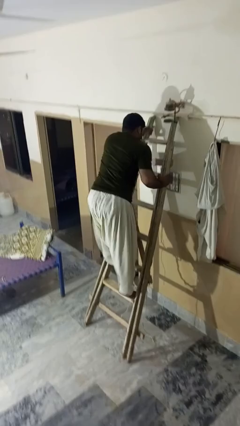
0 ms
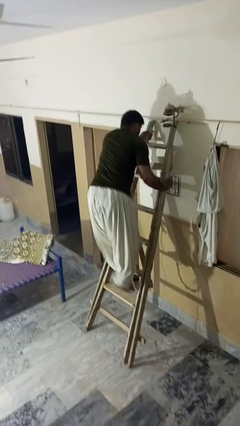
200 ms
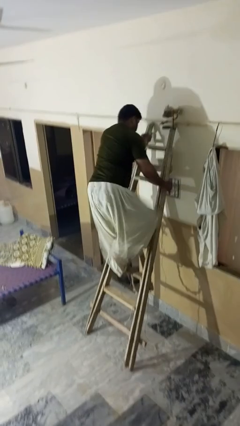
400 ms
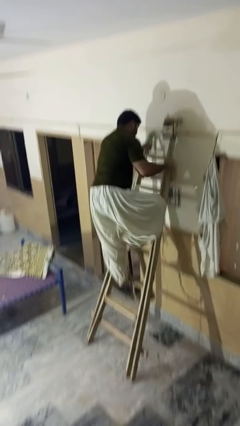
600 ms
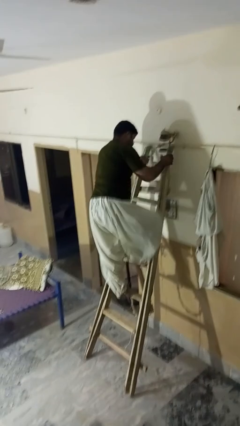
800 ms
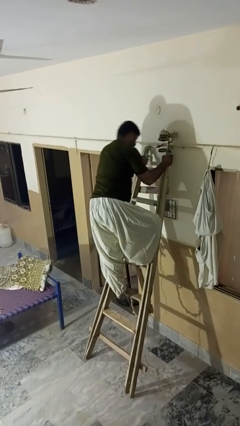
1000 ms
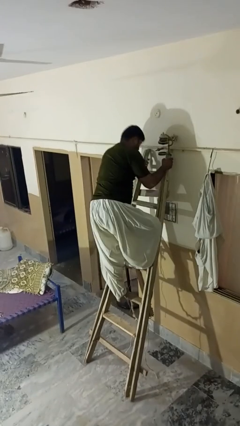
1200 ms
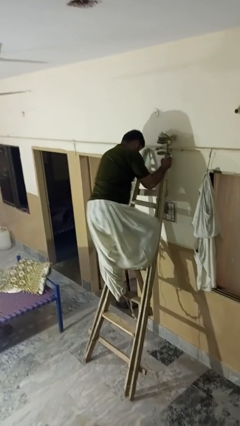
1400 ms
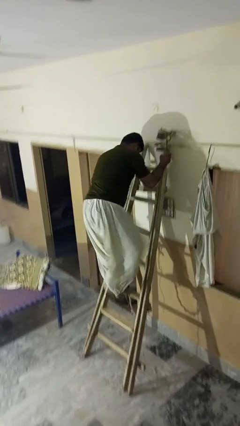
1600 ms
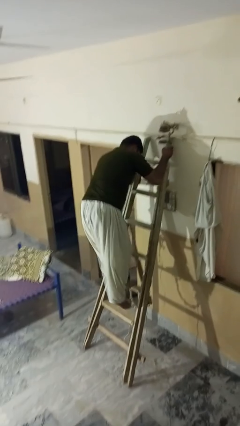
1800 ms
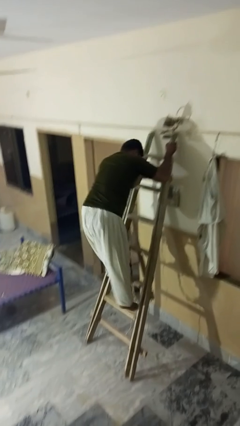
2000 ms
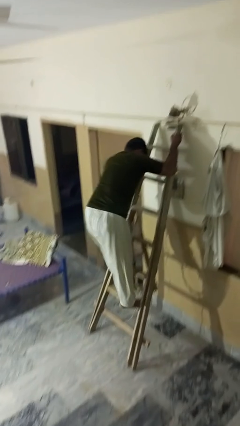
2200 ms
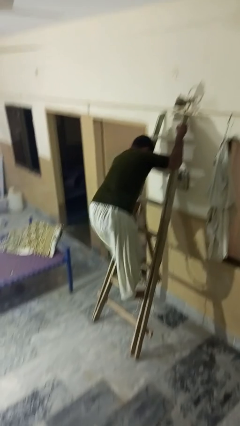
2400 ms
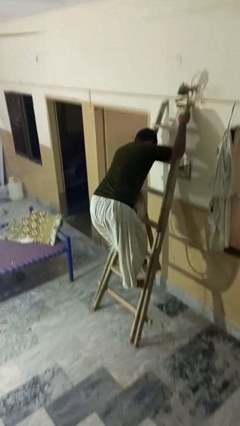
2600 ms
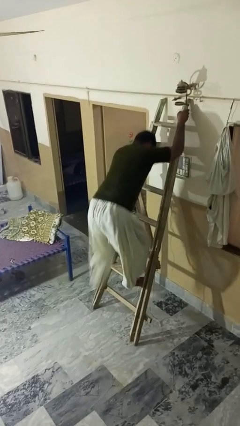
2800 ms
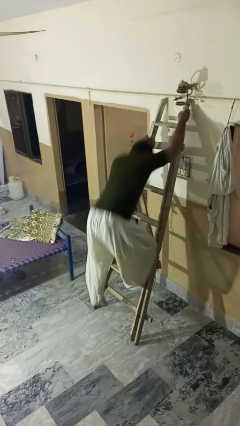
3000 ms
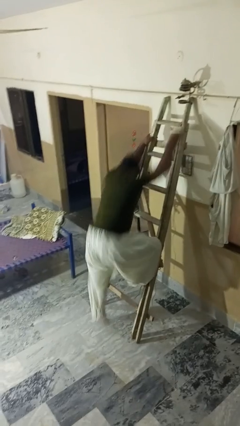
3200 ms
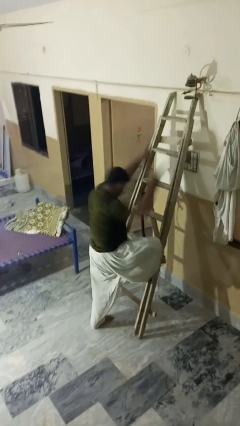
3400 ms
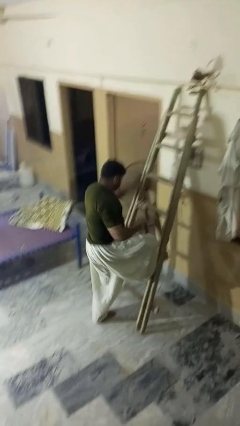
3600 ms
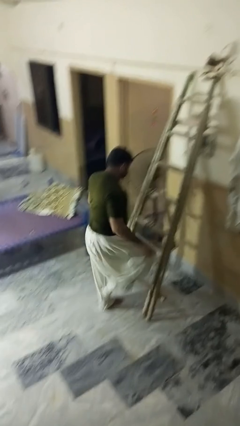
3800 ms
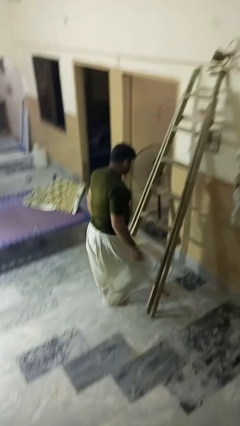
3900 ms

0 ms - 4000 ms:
person climbs down ladder

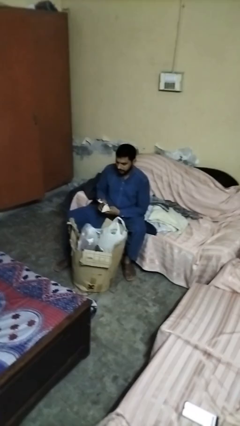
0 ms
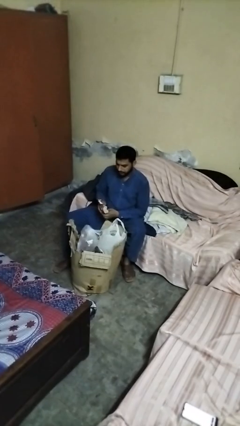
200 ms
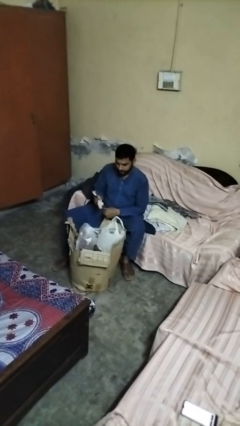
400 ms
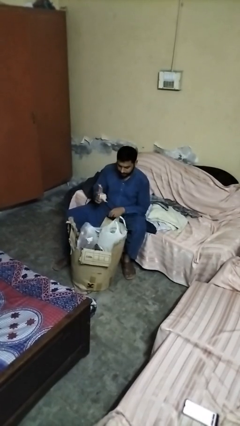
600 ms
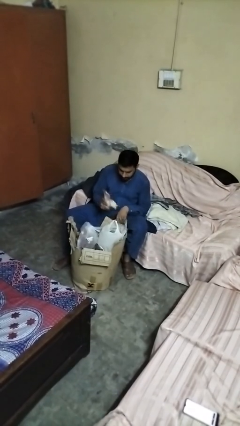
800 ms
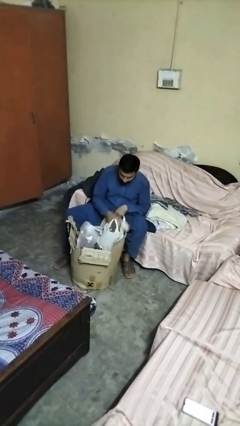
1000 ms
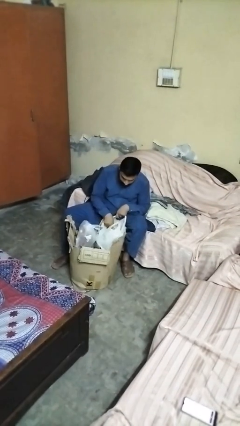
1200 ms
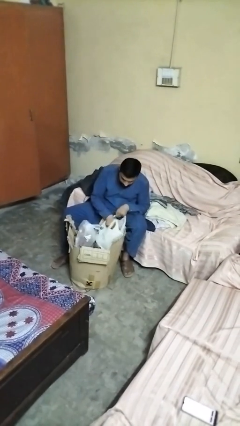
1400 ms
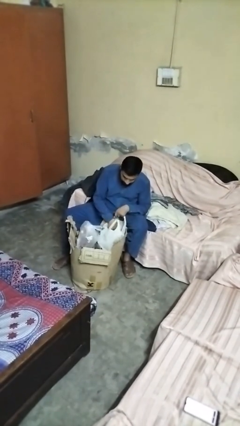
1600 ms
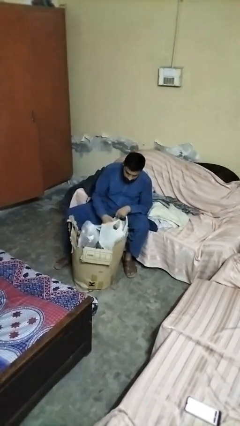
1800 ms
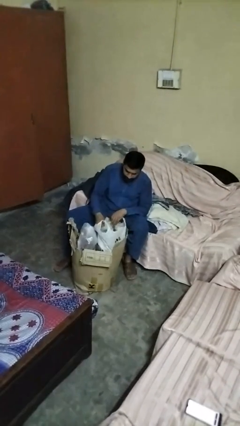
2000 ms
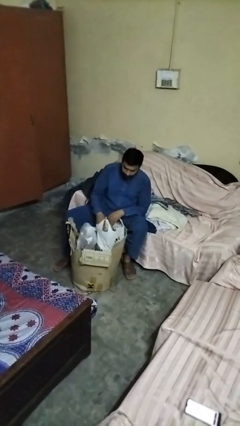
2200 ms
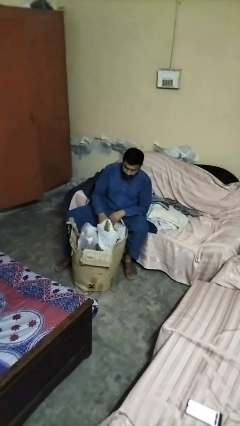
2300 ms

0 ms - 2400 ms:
person puts object into box

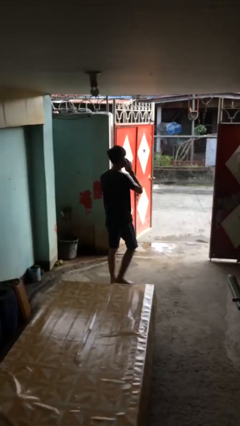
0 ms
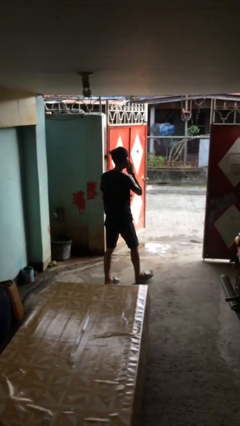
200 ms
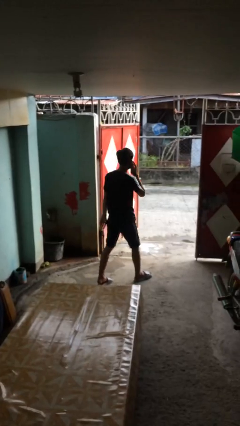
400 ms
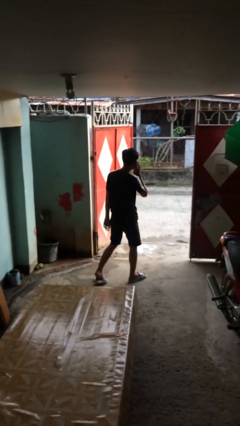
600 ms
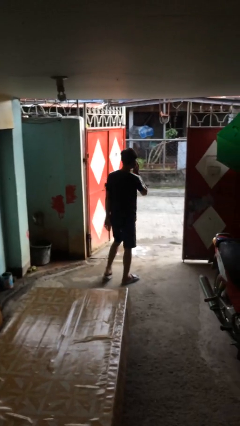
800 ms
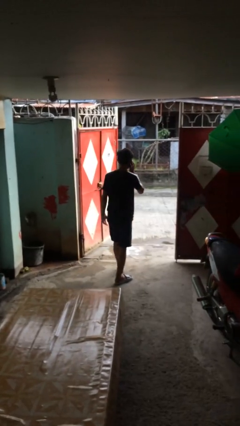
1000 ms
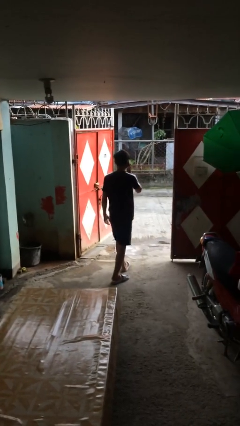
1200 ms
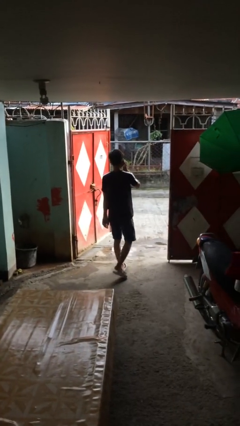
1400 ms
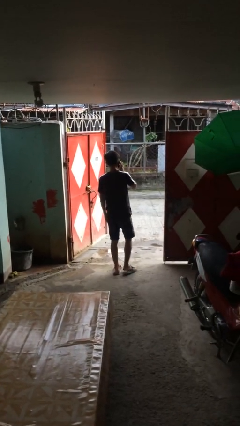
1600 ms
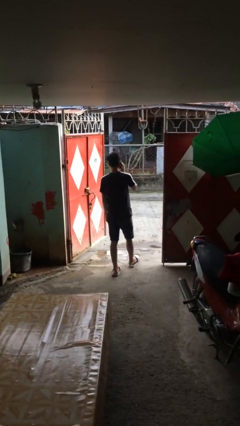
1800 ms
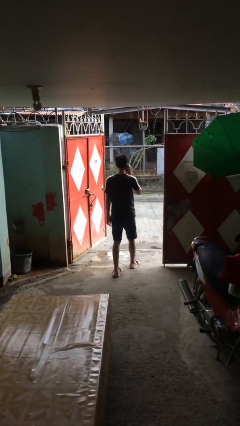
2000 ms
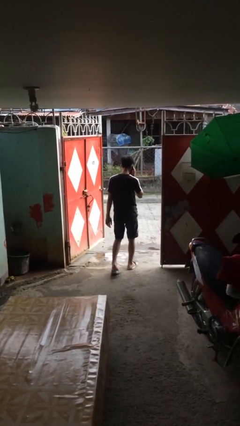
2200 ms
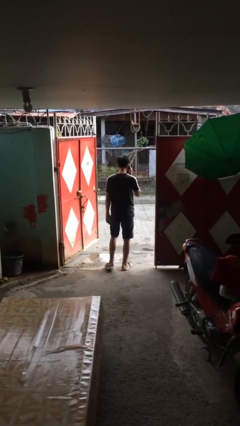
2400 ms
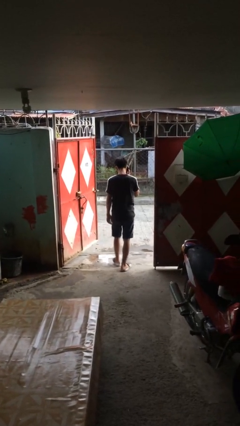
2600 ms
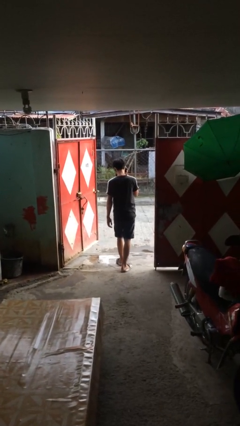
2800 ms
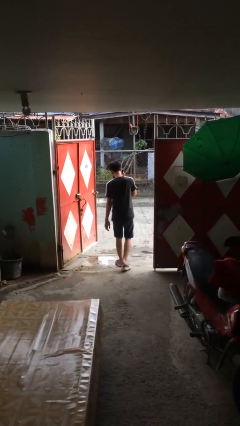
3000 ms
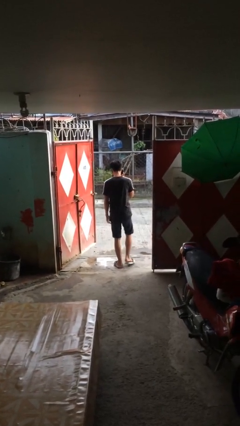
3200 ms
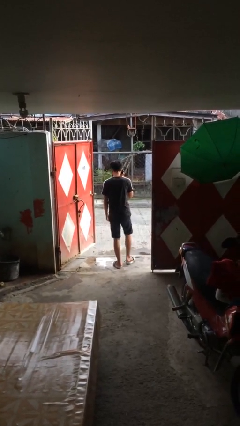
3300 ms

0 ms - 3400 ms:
person exits scene through structure

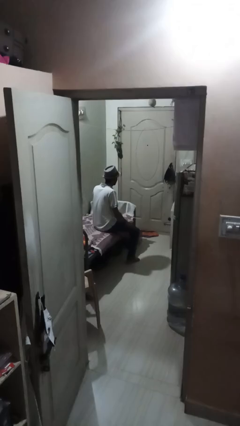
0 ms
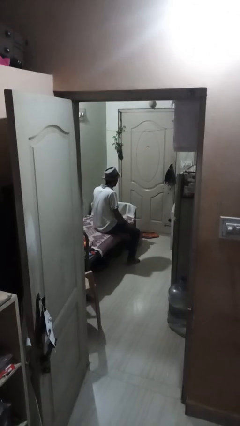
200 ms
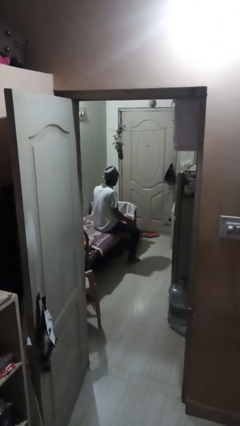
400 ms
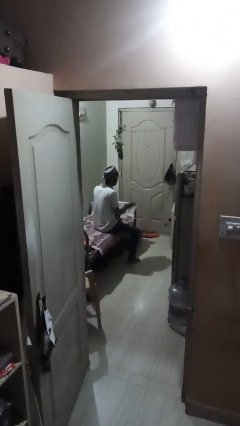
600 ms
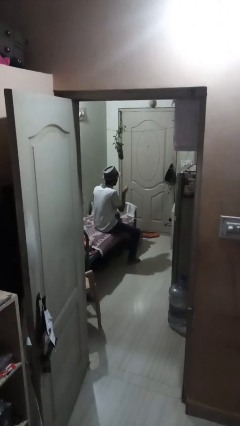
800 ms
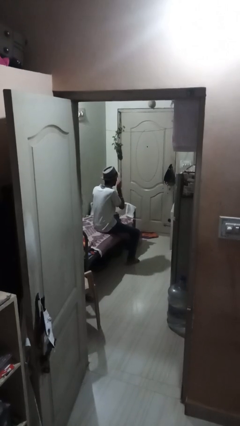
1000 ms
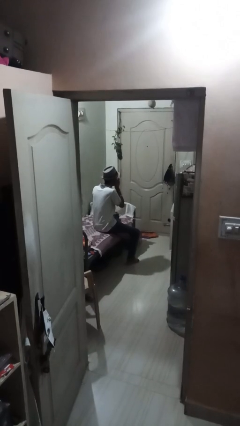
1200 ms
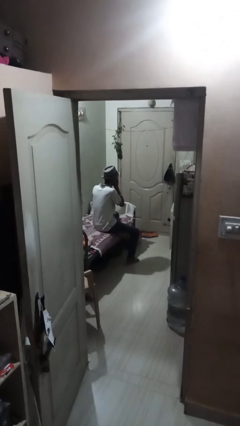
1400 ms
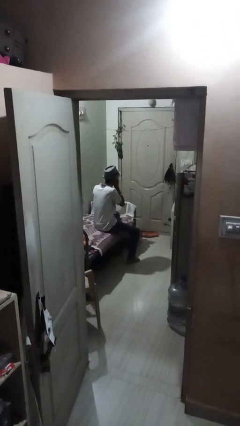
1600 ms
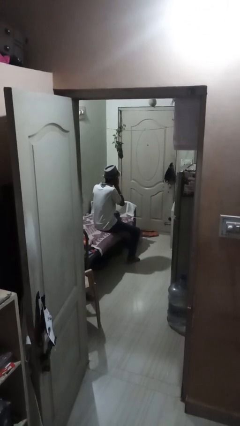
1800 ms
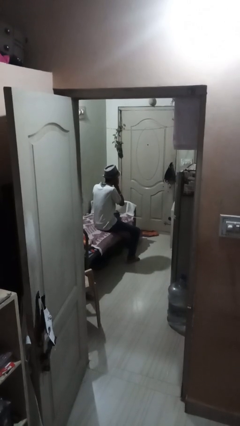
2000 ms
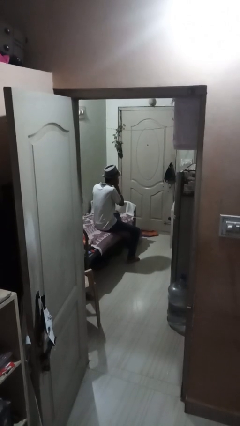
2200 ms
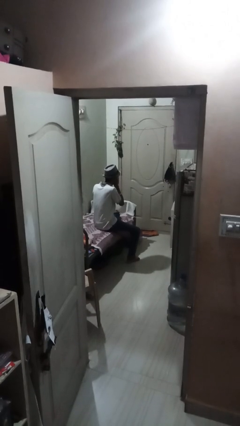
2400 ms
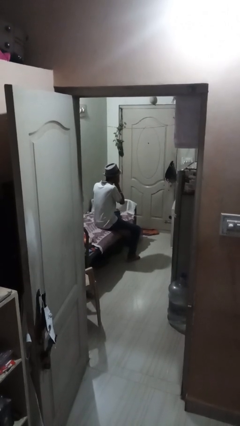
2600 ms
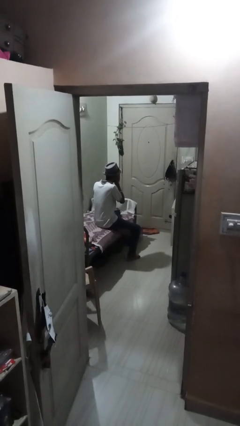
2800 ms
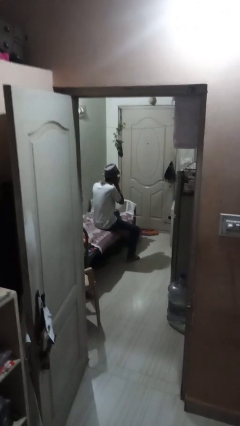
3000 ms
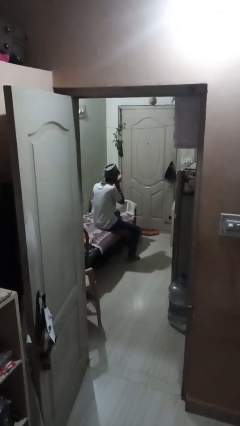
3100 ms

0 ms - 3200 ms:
person gestures blow kiss

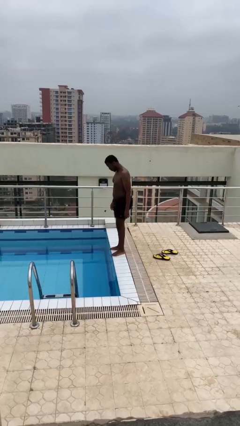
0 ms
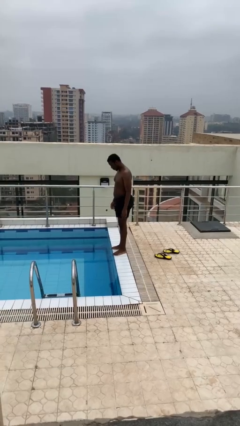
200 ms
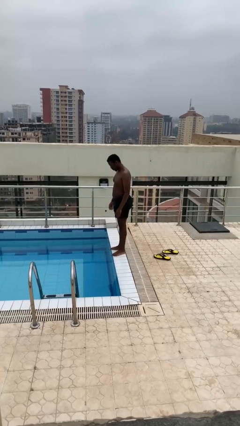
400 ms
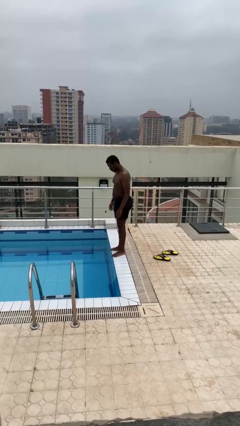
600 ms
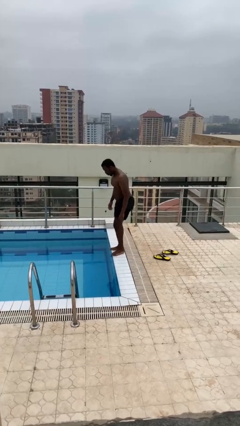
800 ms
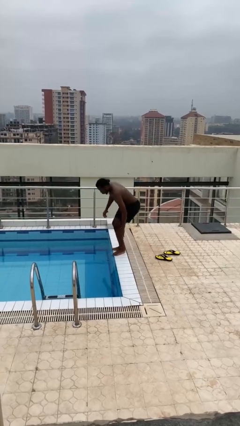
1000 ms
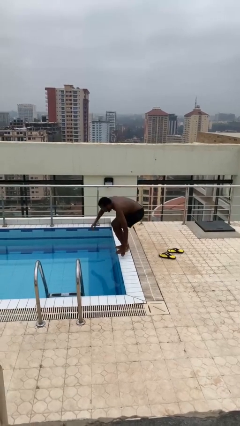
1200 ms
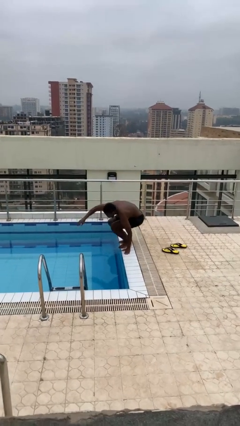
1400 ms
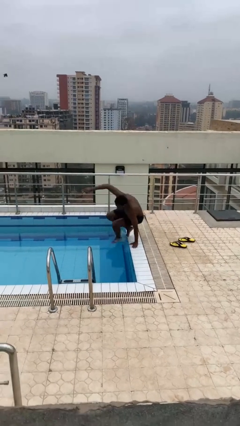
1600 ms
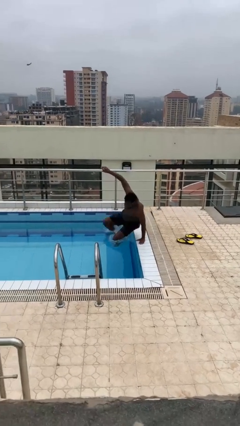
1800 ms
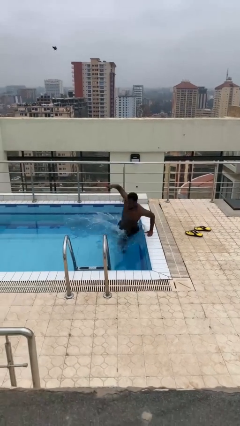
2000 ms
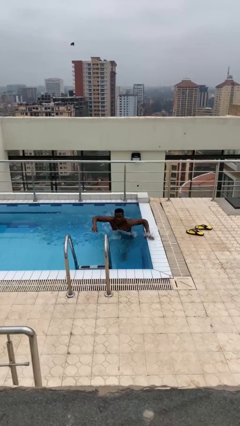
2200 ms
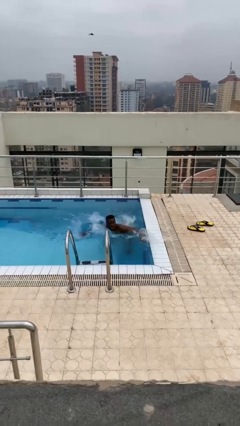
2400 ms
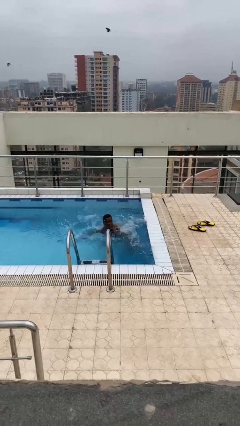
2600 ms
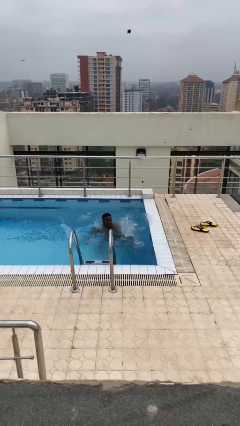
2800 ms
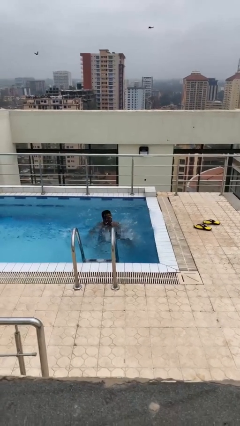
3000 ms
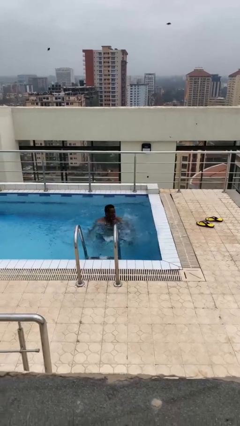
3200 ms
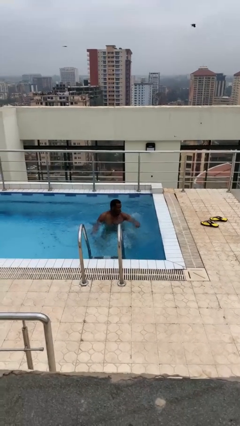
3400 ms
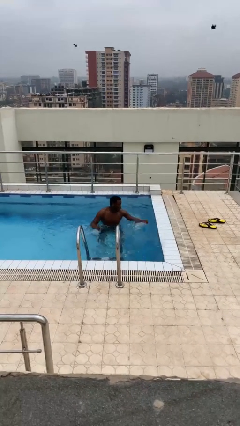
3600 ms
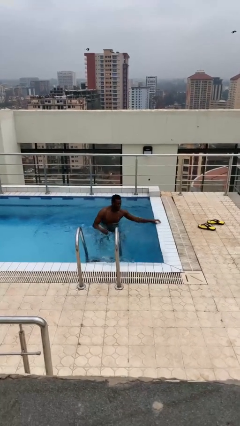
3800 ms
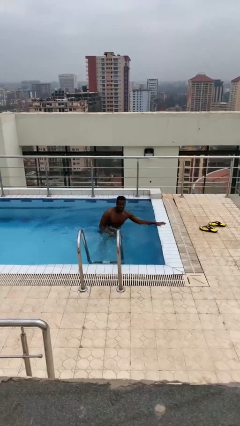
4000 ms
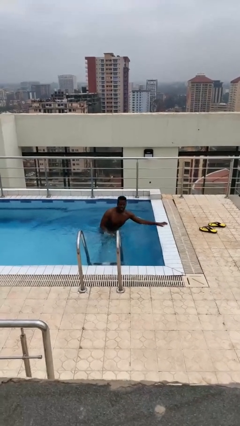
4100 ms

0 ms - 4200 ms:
person jumps into pool

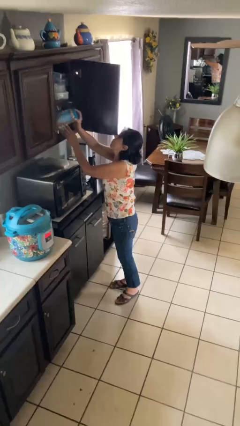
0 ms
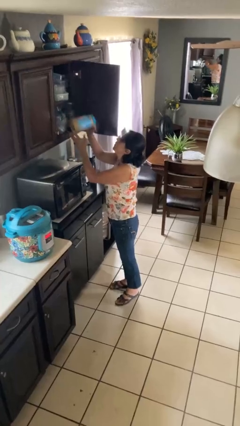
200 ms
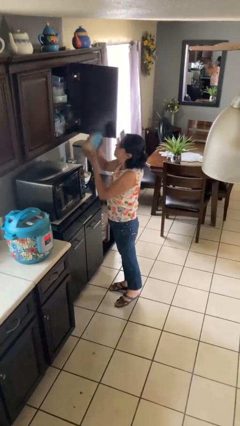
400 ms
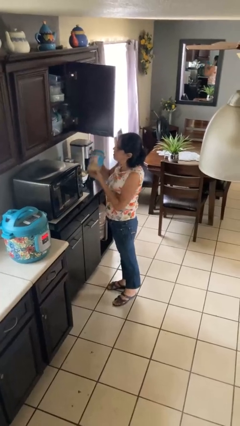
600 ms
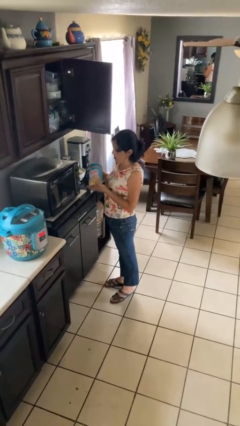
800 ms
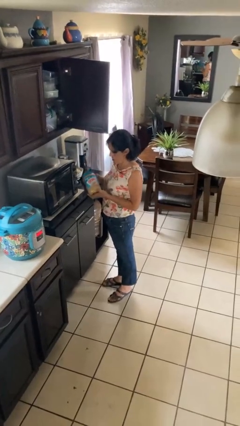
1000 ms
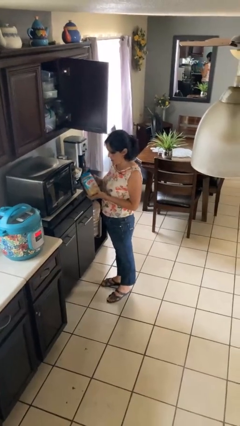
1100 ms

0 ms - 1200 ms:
person picks up object from cabinet
